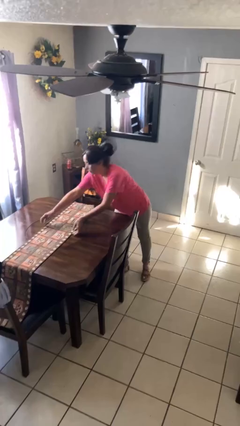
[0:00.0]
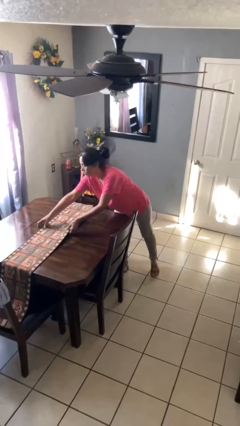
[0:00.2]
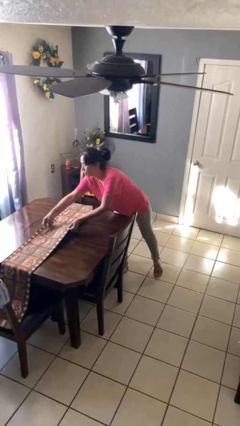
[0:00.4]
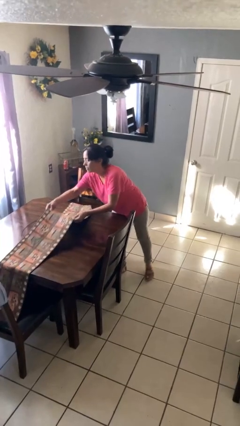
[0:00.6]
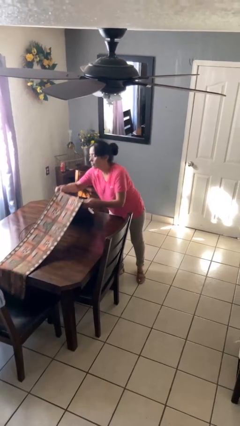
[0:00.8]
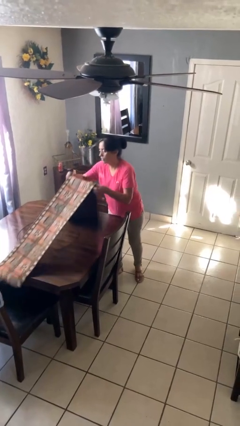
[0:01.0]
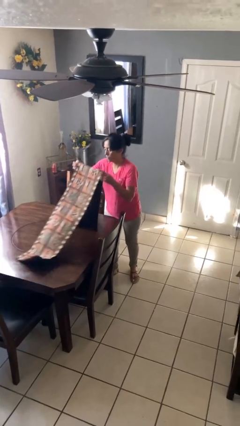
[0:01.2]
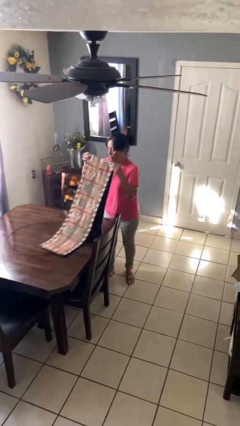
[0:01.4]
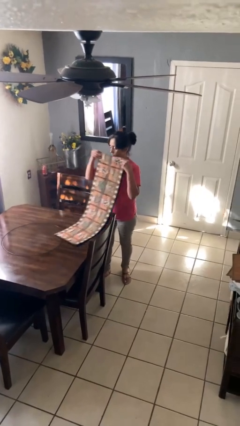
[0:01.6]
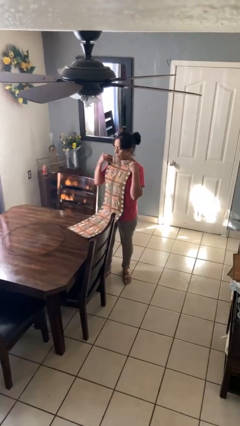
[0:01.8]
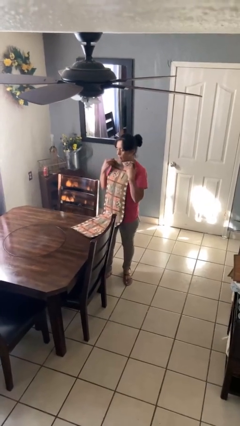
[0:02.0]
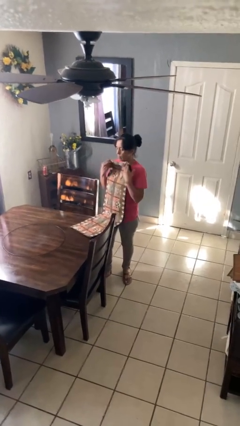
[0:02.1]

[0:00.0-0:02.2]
person folds tablecloth

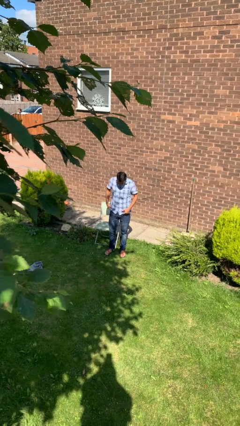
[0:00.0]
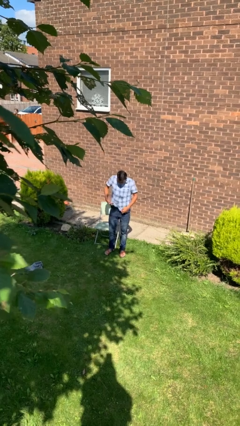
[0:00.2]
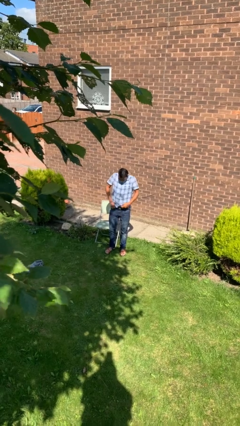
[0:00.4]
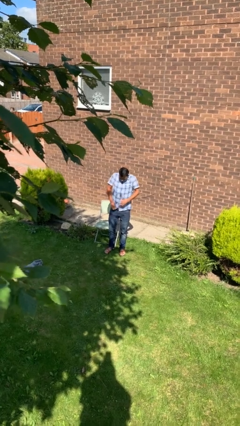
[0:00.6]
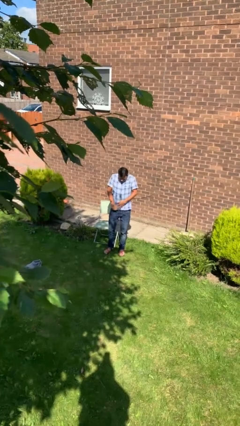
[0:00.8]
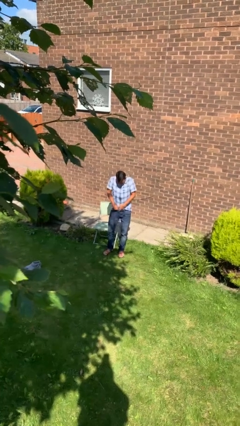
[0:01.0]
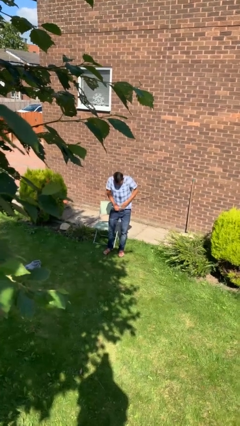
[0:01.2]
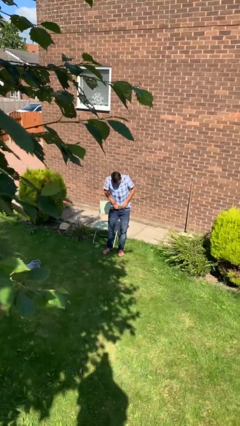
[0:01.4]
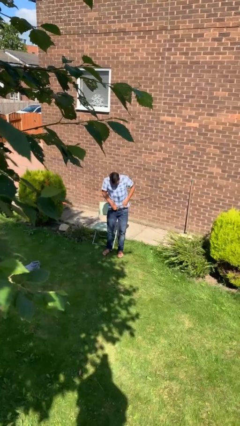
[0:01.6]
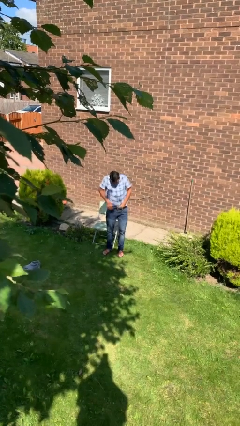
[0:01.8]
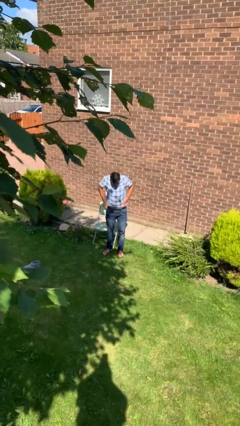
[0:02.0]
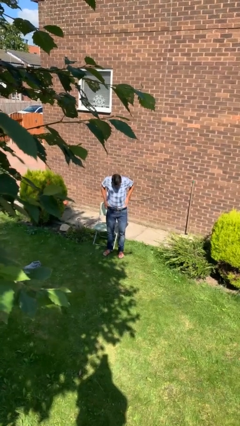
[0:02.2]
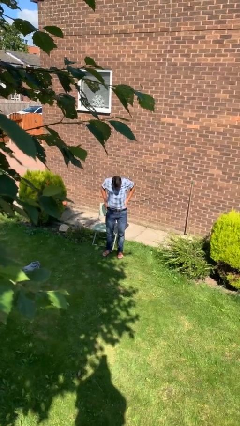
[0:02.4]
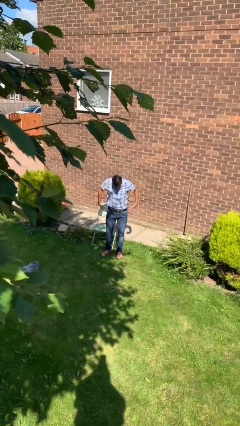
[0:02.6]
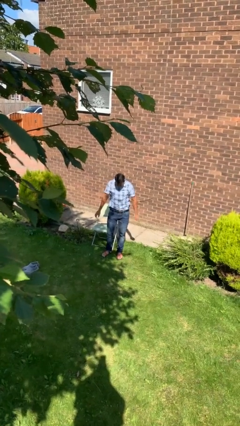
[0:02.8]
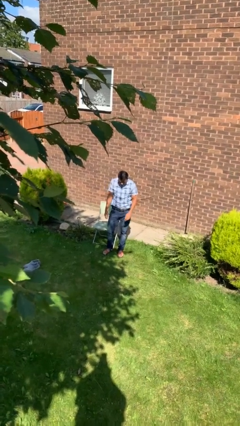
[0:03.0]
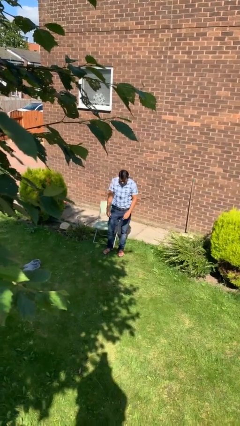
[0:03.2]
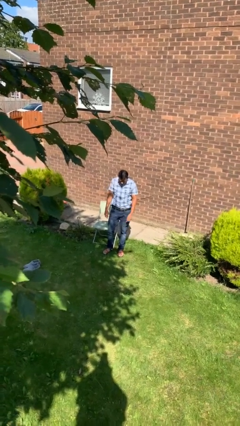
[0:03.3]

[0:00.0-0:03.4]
person tucks in shirt

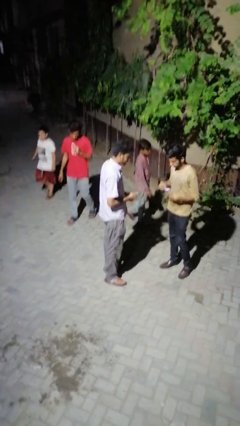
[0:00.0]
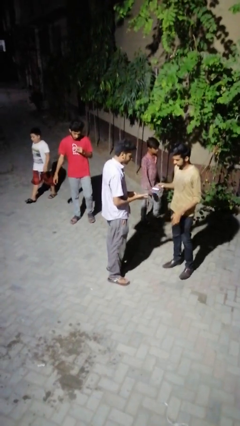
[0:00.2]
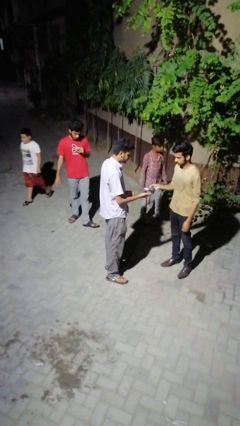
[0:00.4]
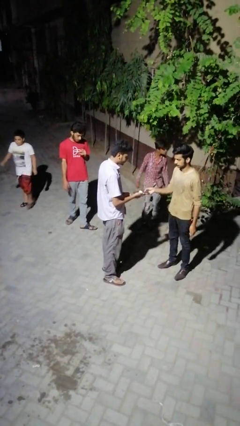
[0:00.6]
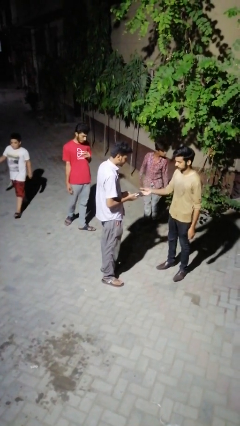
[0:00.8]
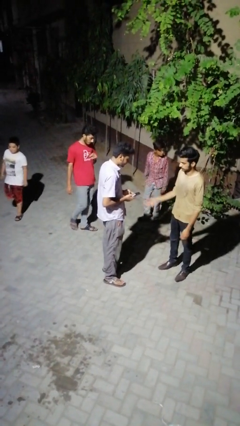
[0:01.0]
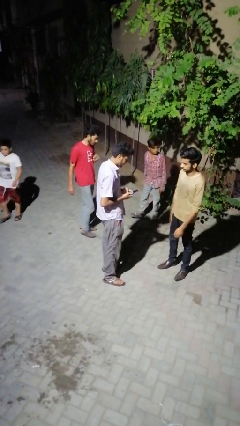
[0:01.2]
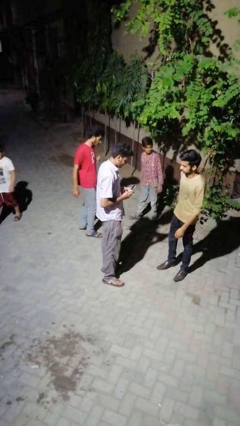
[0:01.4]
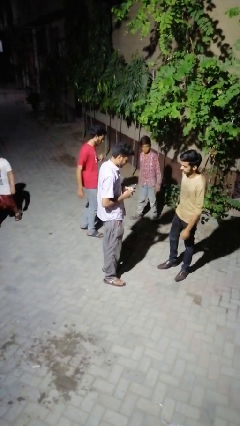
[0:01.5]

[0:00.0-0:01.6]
person transfers object to person

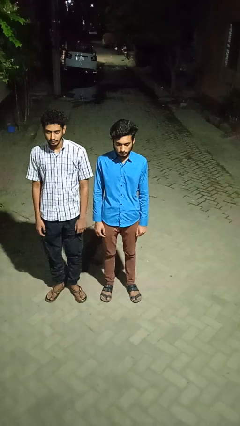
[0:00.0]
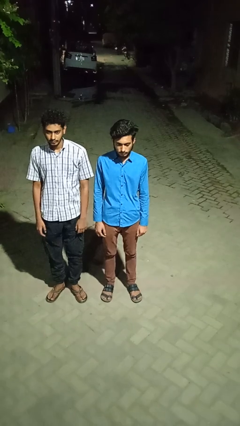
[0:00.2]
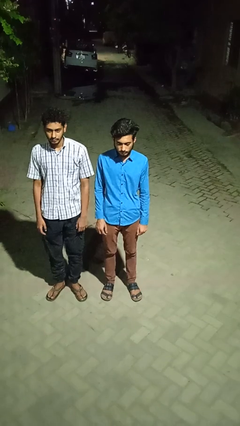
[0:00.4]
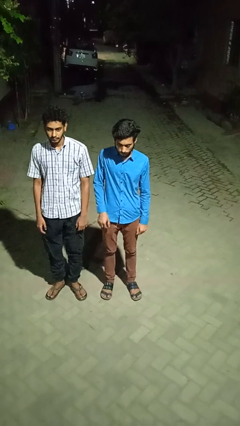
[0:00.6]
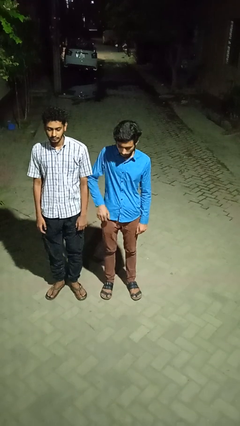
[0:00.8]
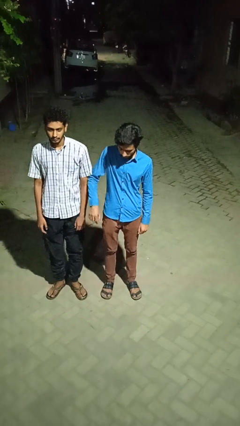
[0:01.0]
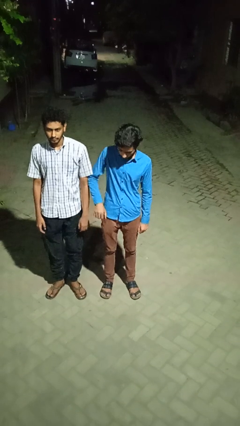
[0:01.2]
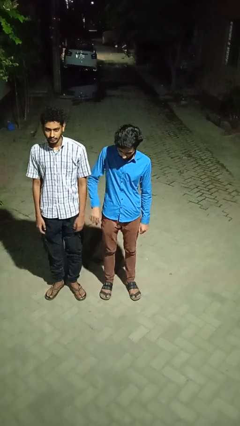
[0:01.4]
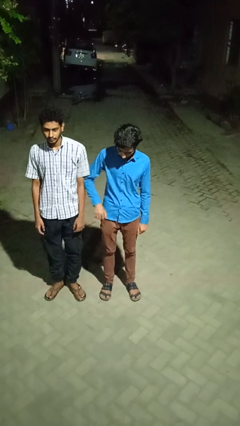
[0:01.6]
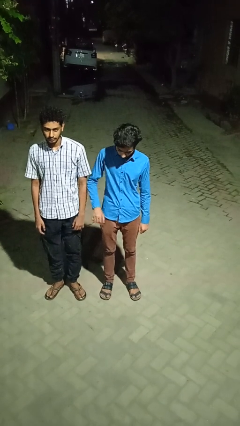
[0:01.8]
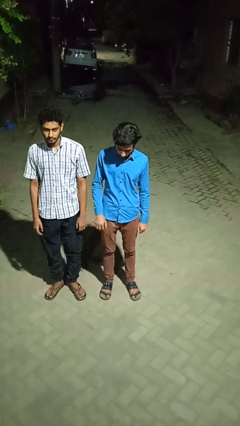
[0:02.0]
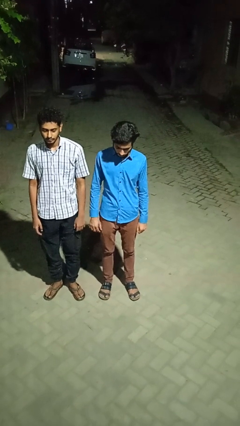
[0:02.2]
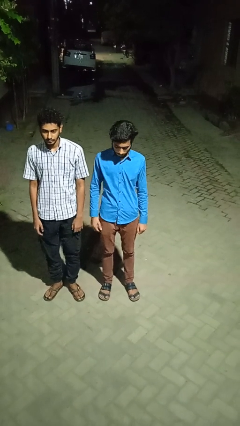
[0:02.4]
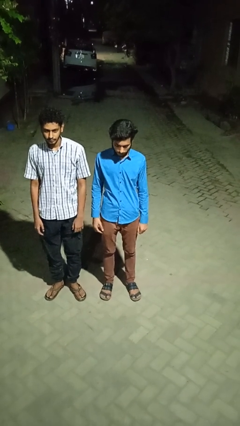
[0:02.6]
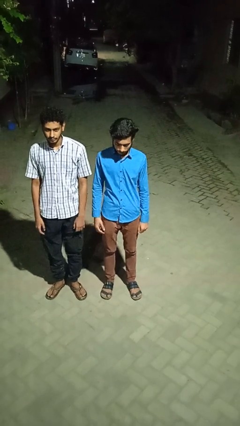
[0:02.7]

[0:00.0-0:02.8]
person nudges person with elbow

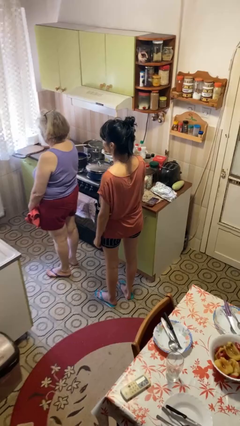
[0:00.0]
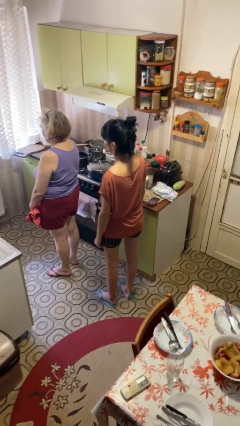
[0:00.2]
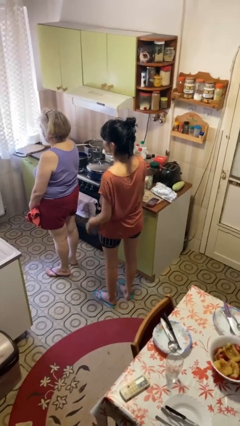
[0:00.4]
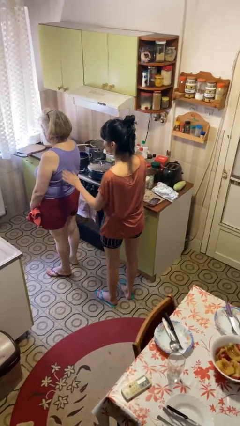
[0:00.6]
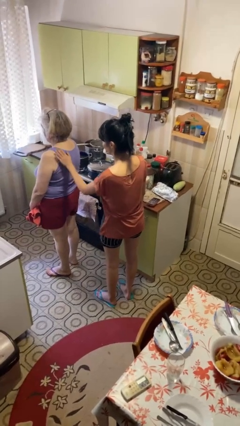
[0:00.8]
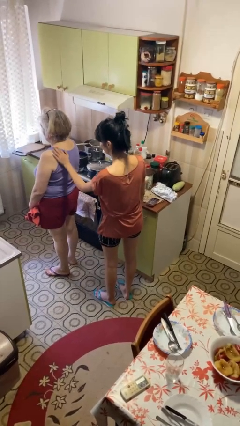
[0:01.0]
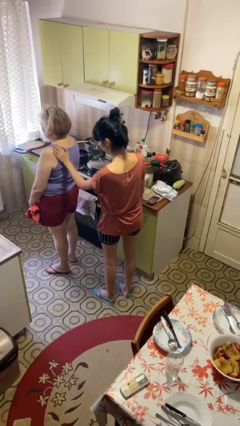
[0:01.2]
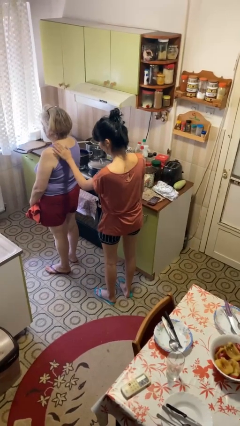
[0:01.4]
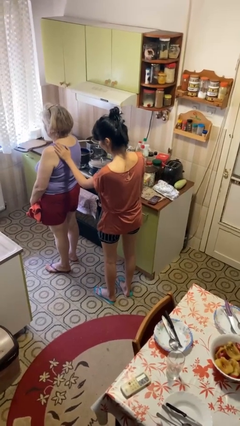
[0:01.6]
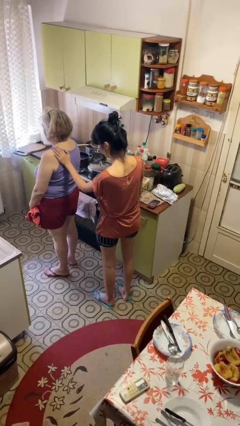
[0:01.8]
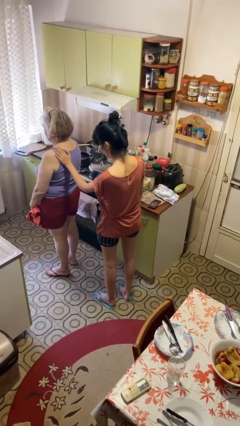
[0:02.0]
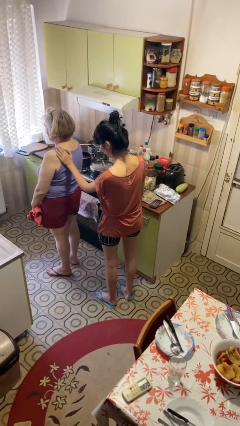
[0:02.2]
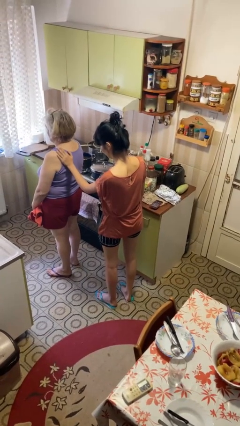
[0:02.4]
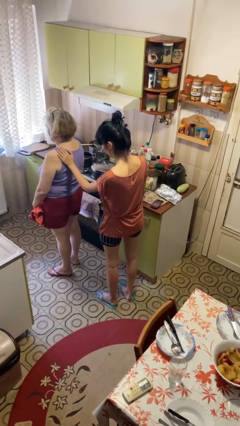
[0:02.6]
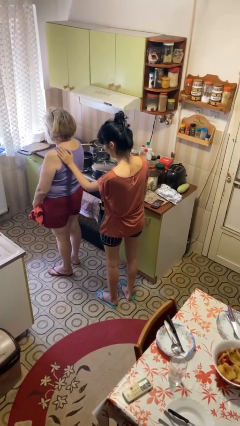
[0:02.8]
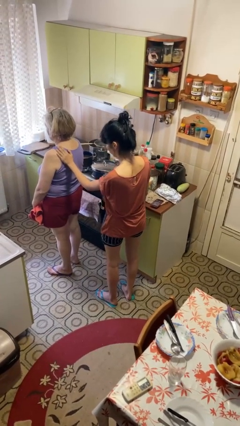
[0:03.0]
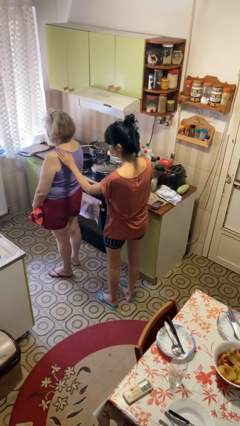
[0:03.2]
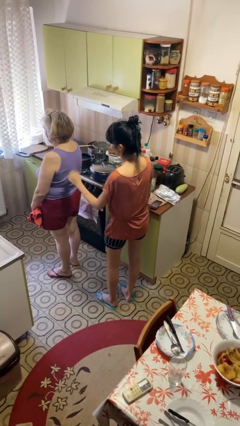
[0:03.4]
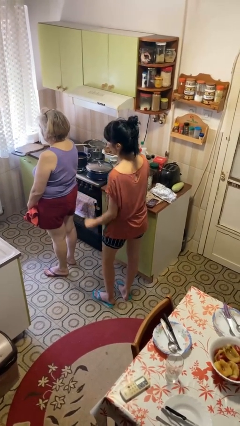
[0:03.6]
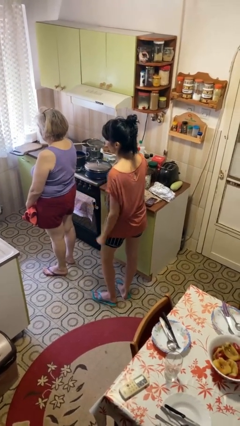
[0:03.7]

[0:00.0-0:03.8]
person touches back of person

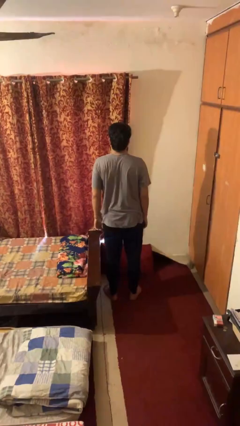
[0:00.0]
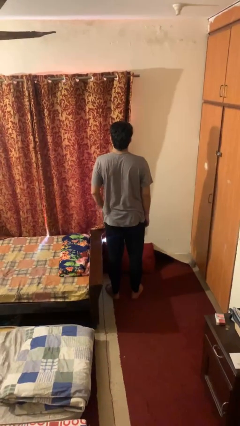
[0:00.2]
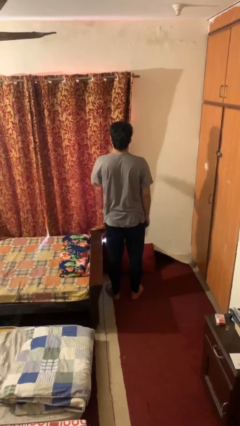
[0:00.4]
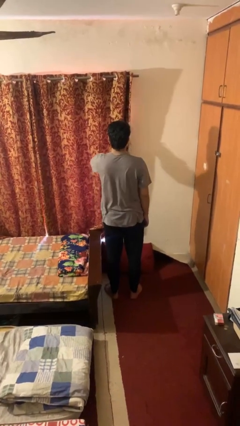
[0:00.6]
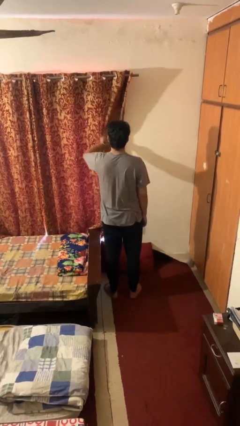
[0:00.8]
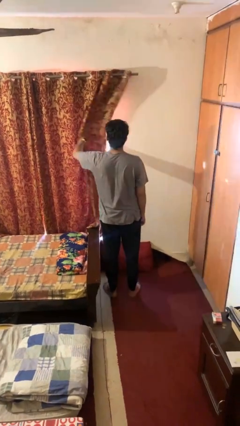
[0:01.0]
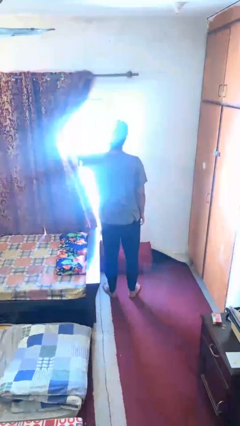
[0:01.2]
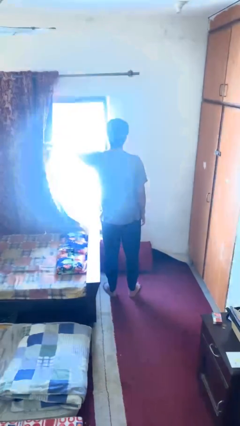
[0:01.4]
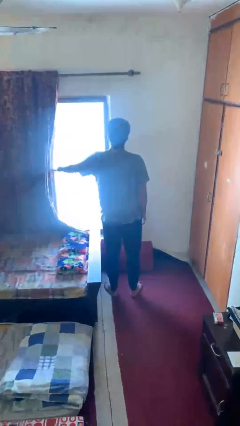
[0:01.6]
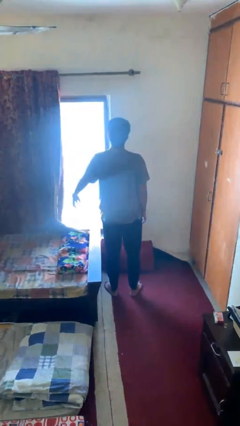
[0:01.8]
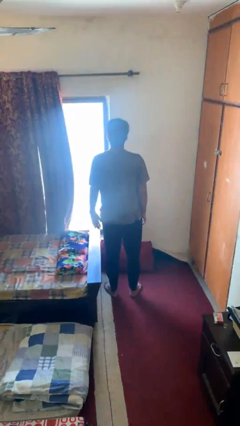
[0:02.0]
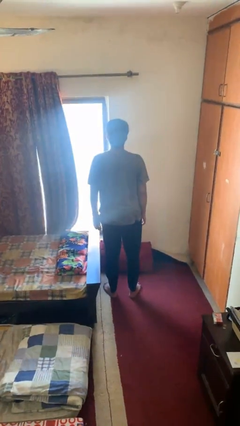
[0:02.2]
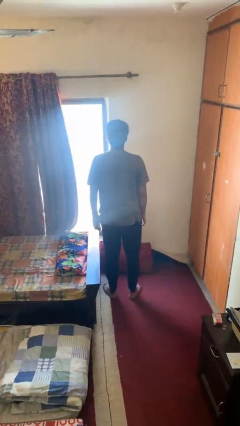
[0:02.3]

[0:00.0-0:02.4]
person opens curtains

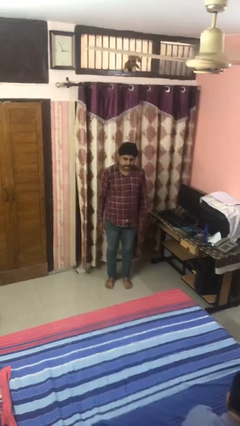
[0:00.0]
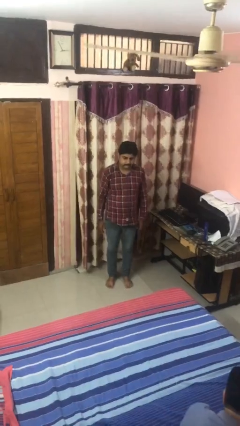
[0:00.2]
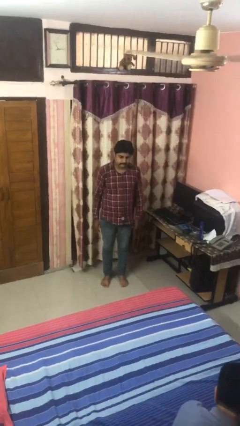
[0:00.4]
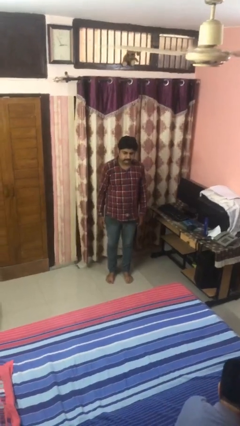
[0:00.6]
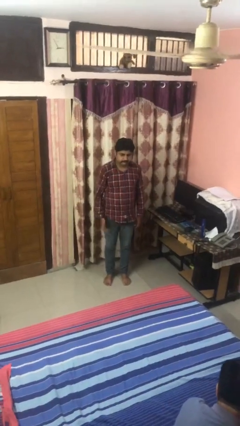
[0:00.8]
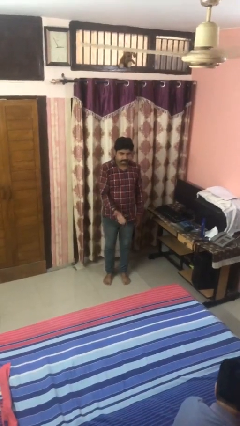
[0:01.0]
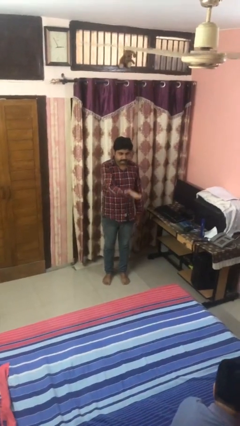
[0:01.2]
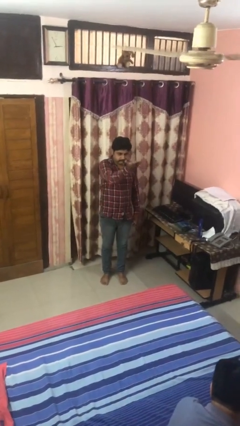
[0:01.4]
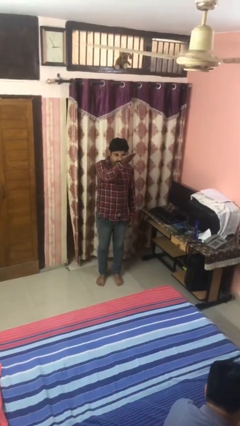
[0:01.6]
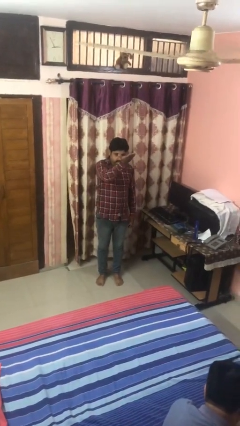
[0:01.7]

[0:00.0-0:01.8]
person gestures swipe up
